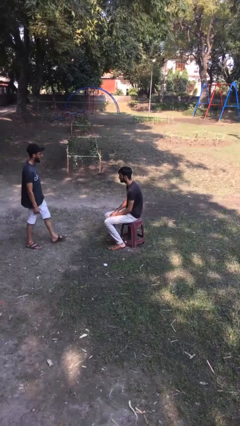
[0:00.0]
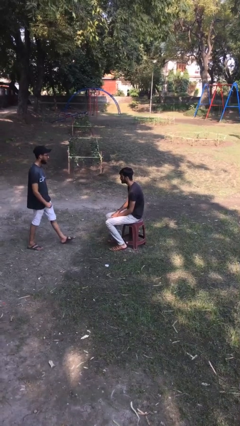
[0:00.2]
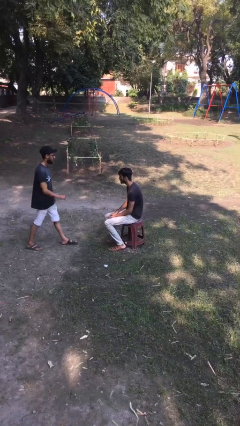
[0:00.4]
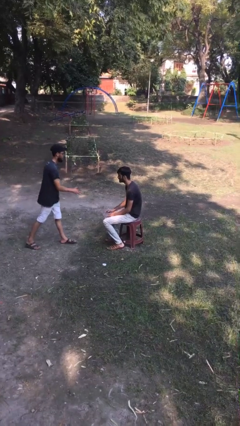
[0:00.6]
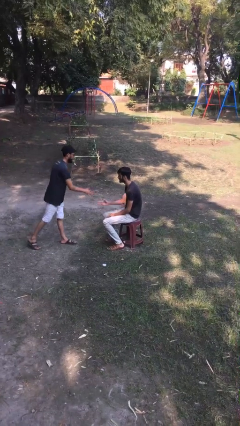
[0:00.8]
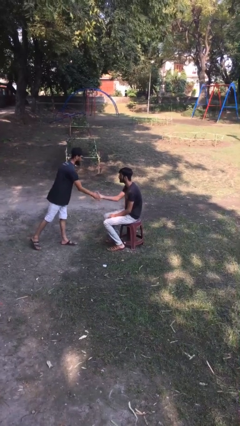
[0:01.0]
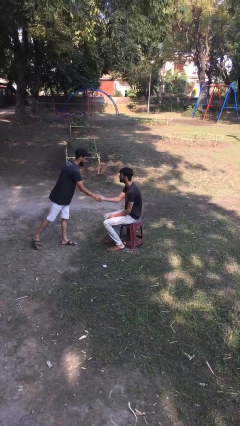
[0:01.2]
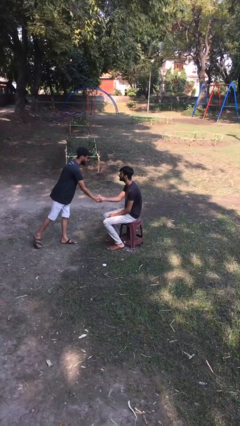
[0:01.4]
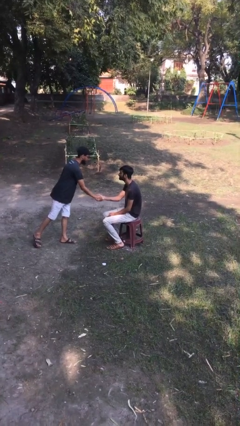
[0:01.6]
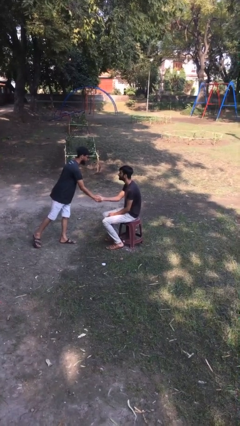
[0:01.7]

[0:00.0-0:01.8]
person shakes hand

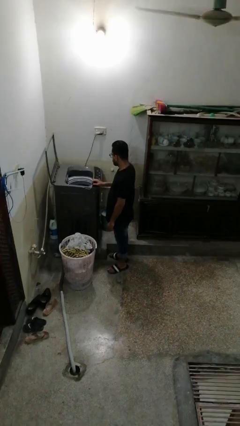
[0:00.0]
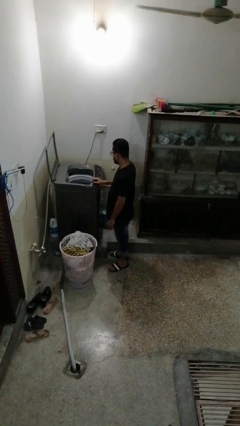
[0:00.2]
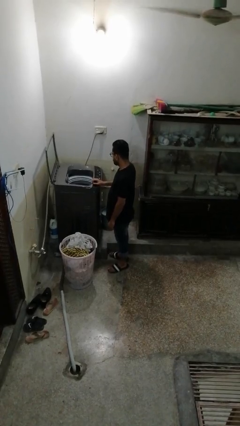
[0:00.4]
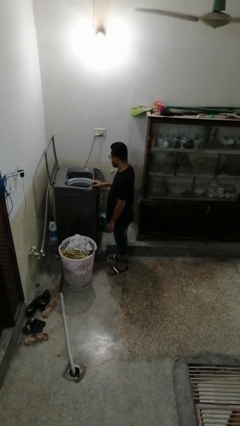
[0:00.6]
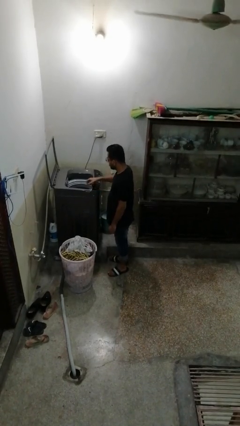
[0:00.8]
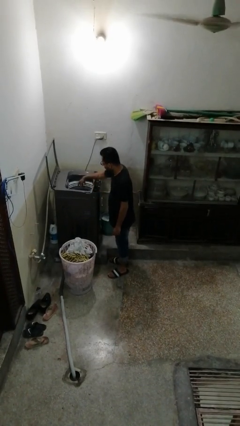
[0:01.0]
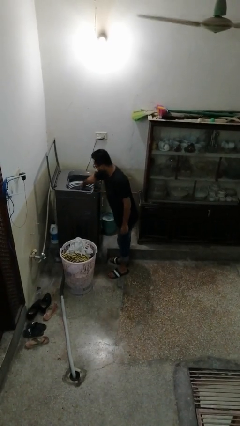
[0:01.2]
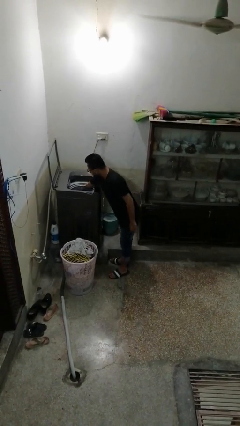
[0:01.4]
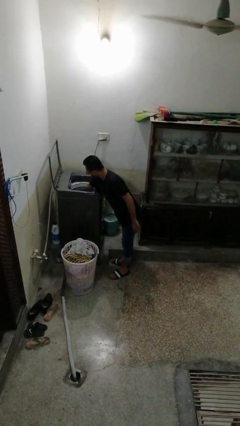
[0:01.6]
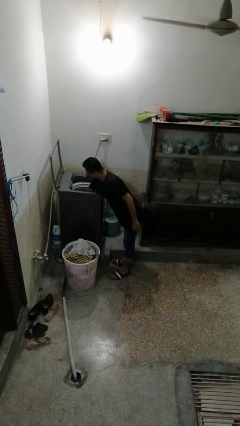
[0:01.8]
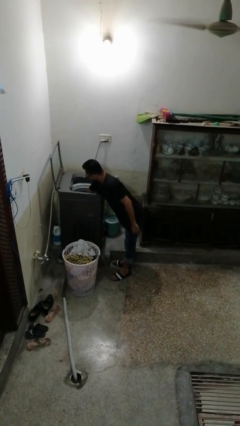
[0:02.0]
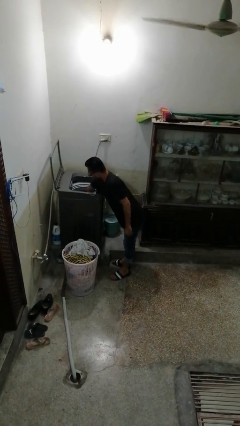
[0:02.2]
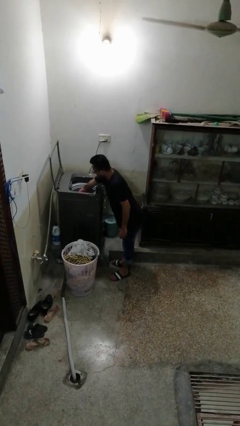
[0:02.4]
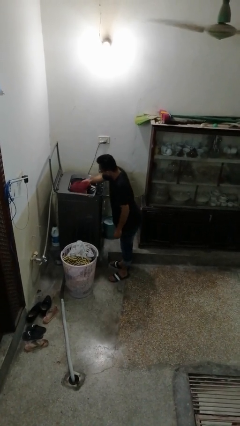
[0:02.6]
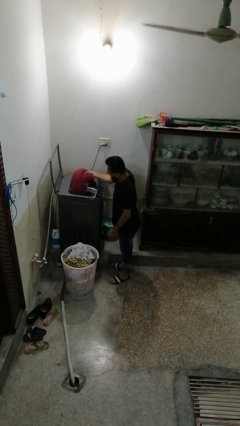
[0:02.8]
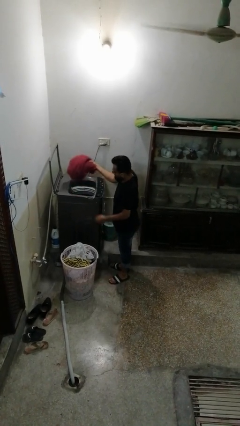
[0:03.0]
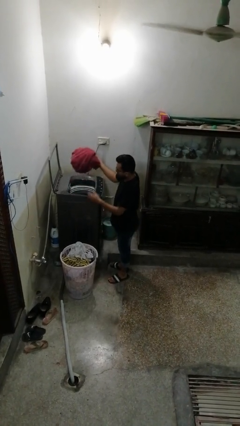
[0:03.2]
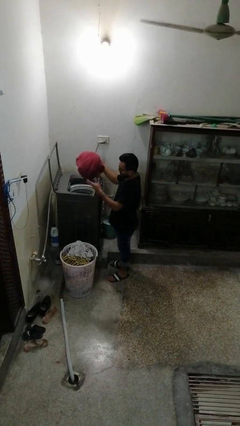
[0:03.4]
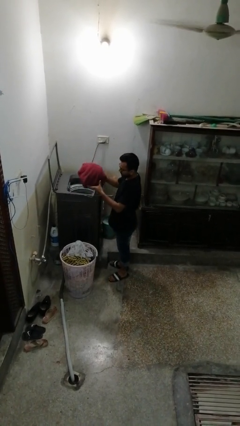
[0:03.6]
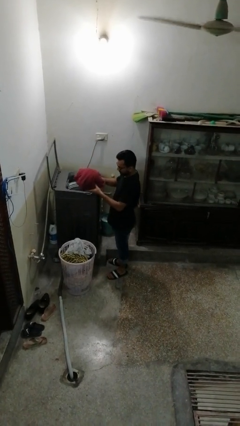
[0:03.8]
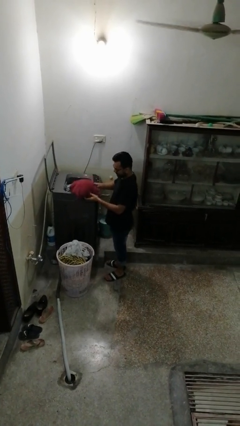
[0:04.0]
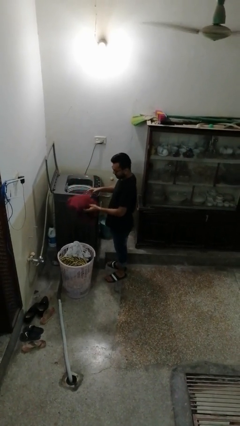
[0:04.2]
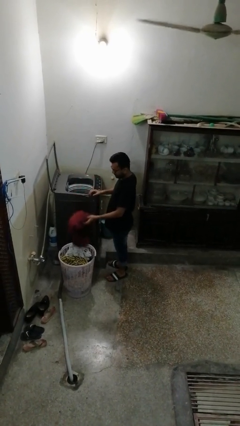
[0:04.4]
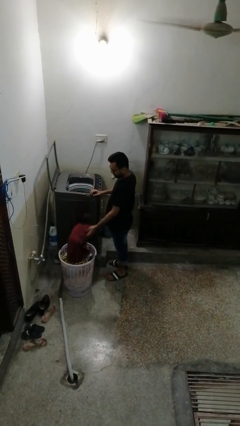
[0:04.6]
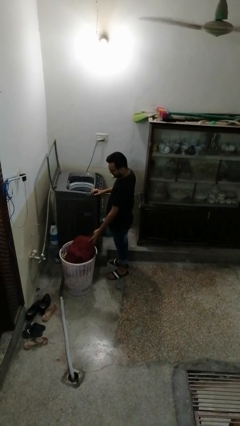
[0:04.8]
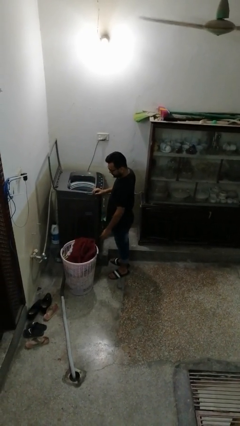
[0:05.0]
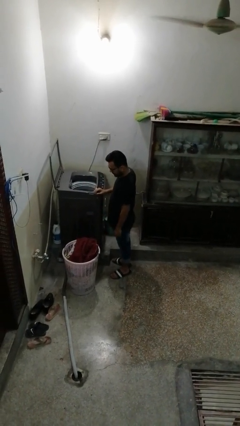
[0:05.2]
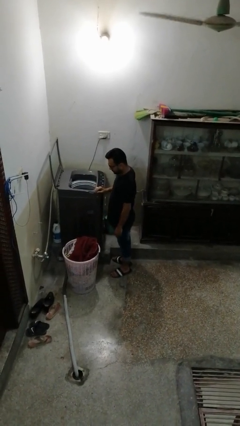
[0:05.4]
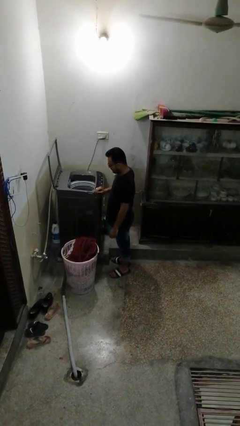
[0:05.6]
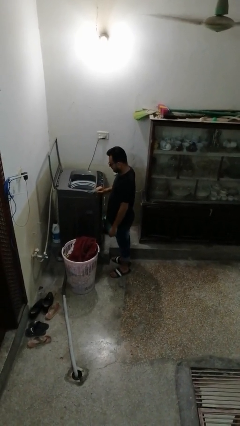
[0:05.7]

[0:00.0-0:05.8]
person unloads clotheswasher

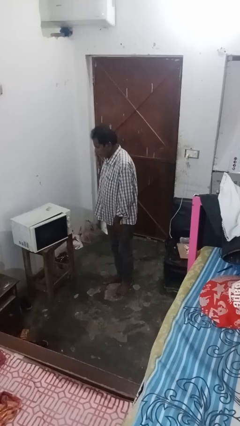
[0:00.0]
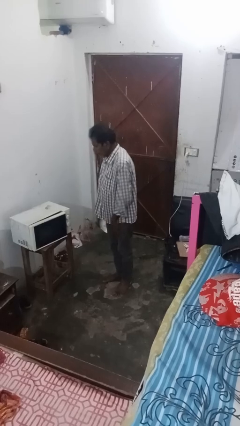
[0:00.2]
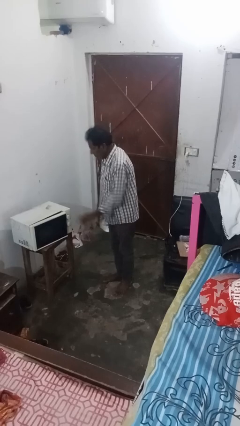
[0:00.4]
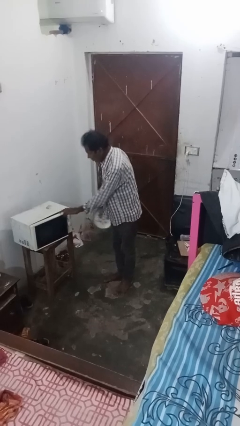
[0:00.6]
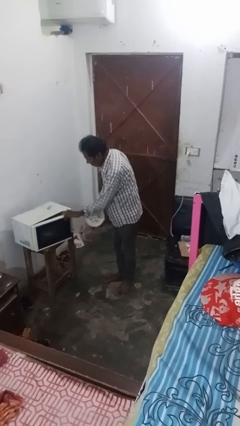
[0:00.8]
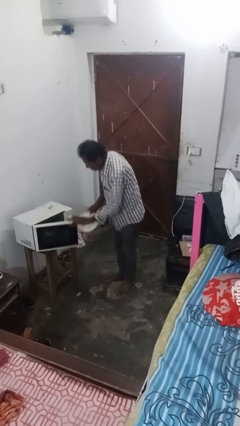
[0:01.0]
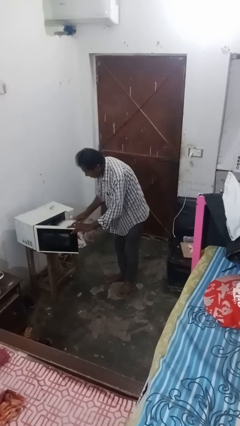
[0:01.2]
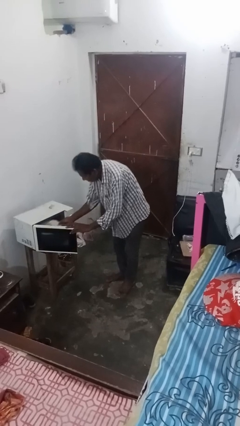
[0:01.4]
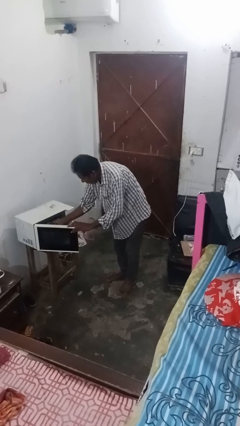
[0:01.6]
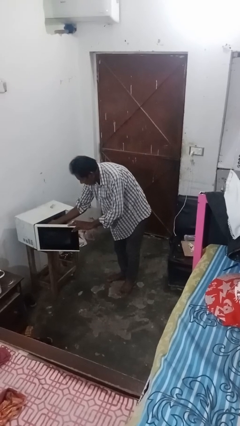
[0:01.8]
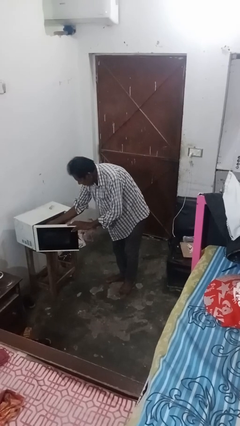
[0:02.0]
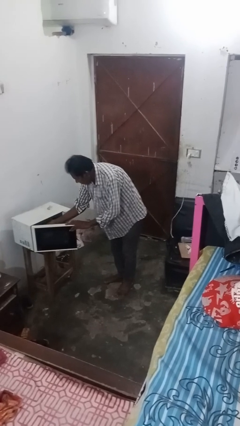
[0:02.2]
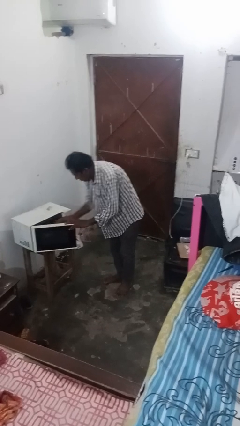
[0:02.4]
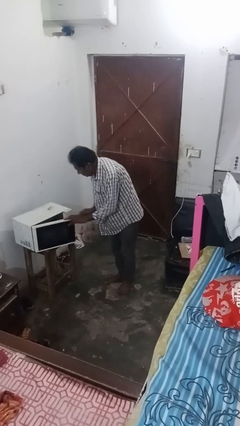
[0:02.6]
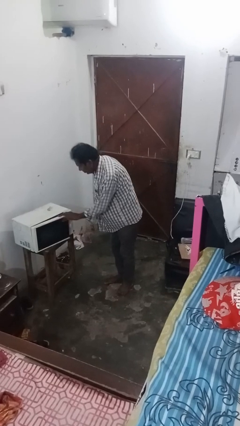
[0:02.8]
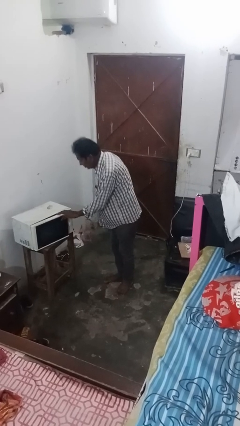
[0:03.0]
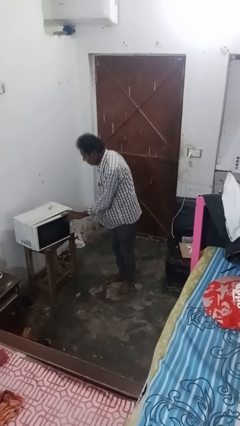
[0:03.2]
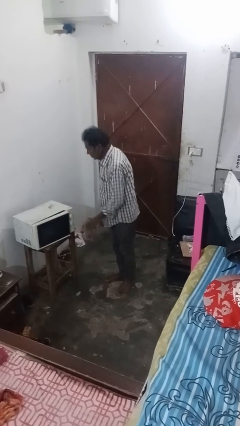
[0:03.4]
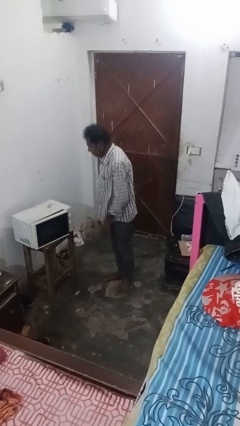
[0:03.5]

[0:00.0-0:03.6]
person puts object into microwave

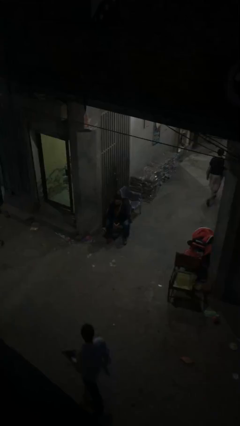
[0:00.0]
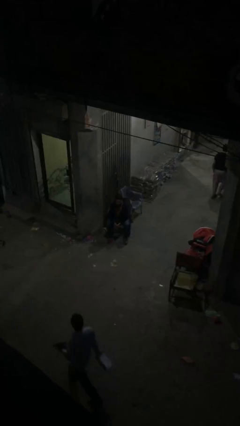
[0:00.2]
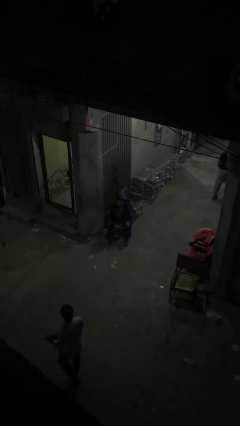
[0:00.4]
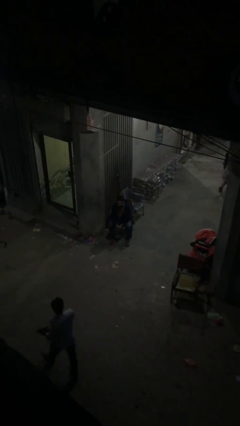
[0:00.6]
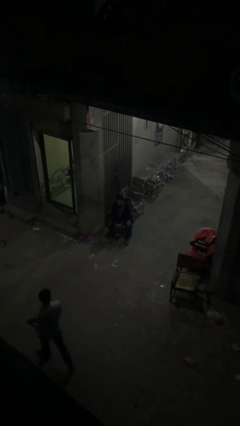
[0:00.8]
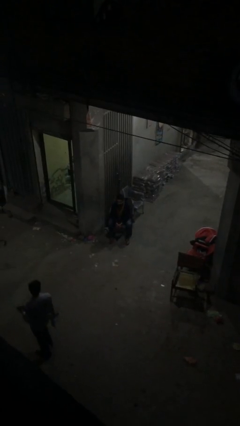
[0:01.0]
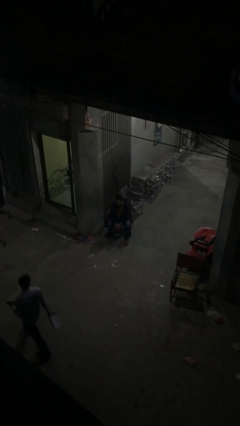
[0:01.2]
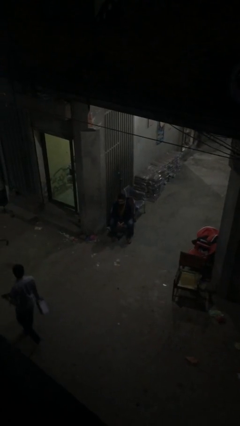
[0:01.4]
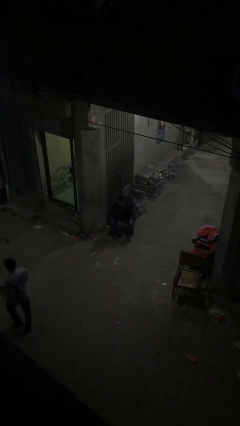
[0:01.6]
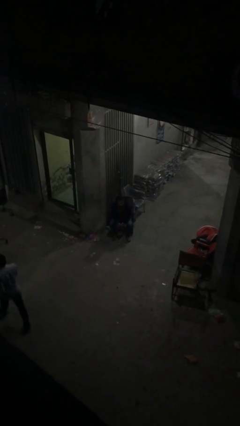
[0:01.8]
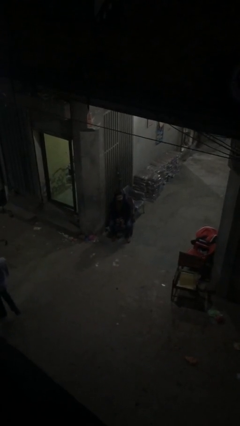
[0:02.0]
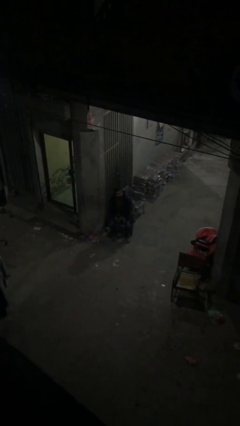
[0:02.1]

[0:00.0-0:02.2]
person stands up

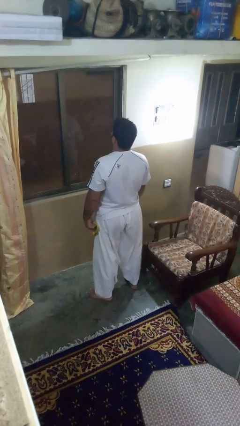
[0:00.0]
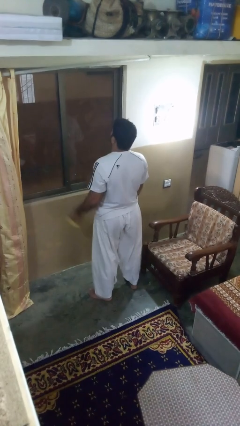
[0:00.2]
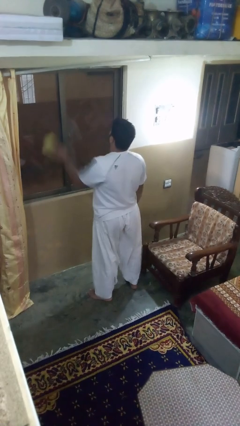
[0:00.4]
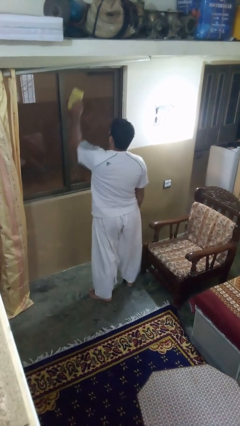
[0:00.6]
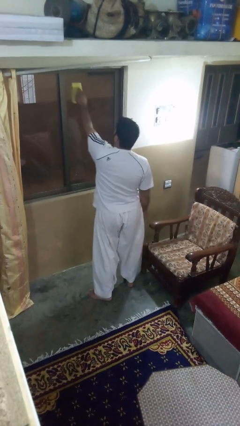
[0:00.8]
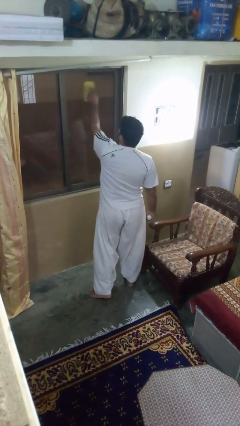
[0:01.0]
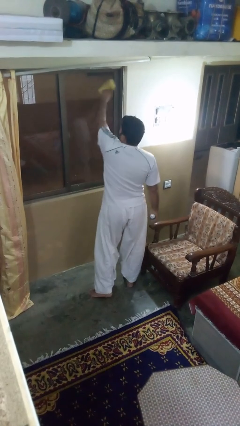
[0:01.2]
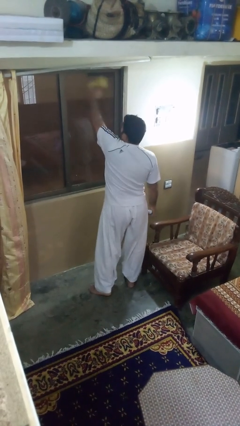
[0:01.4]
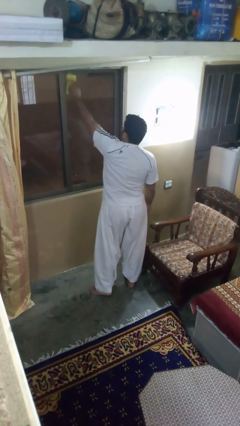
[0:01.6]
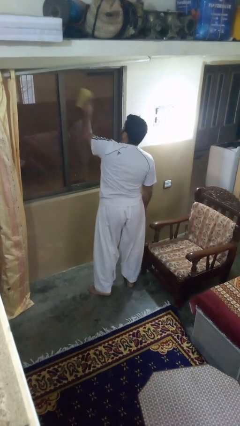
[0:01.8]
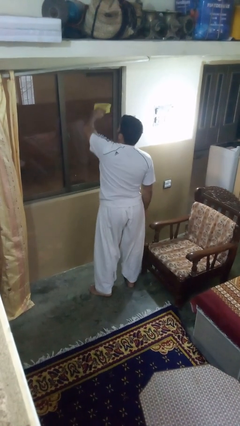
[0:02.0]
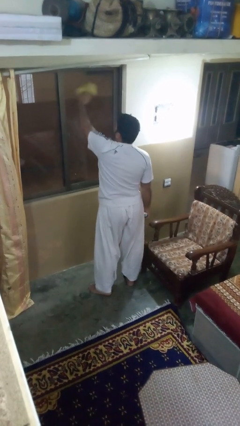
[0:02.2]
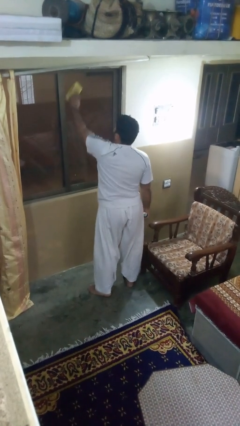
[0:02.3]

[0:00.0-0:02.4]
person washes window

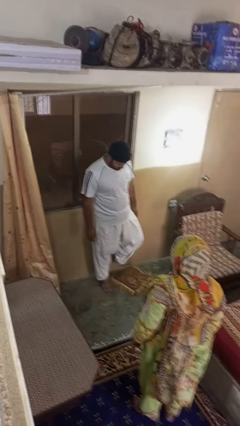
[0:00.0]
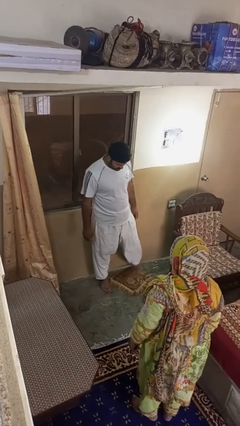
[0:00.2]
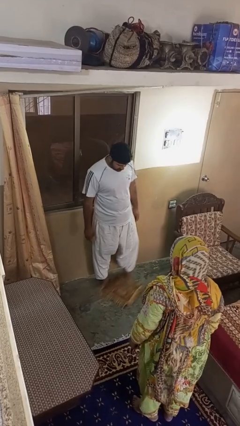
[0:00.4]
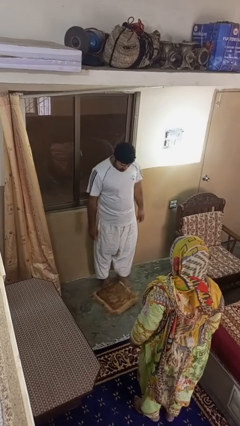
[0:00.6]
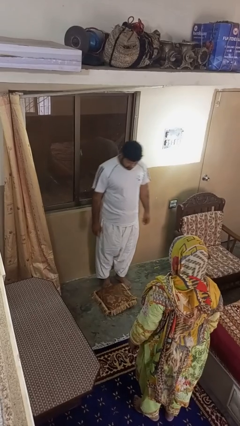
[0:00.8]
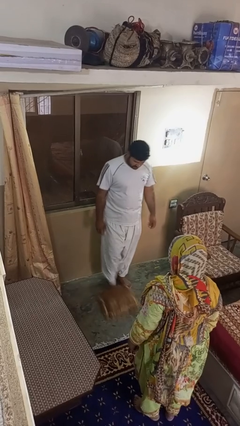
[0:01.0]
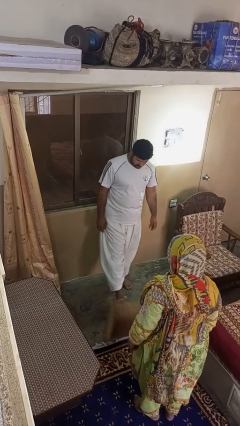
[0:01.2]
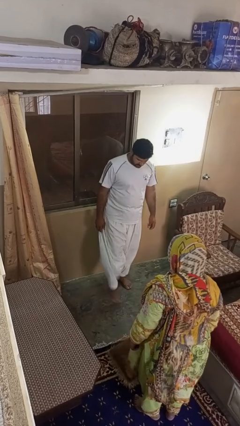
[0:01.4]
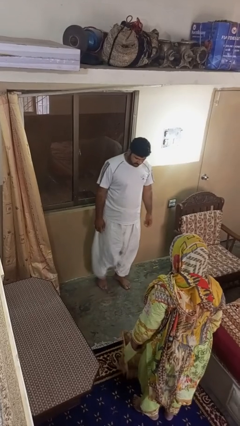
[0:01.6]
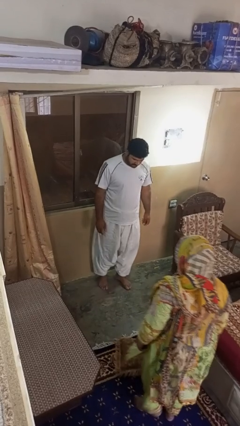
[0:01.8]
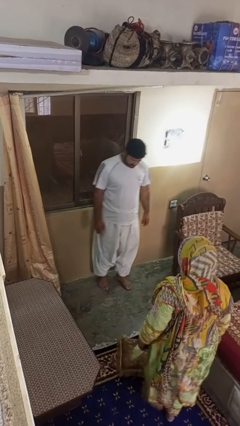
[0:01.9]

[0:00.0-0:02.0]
person kicks object to person
